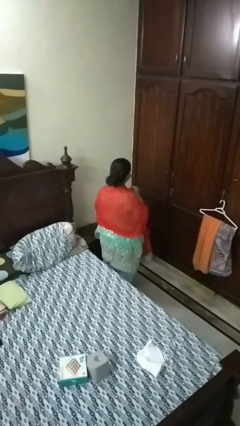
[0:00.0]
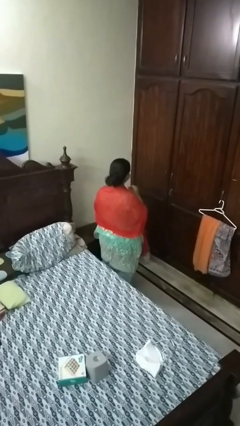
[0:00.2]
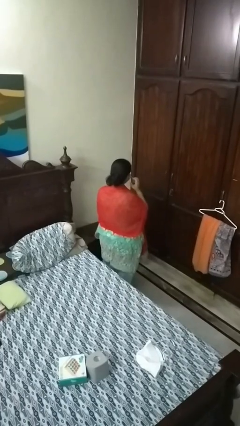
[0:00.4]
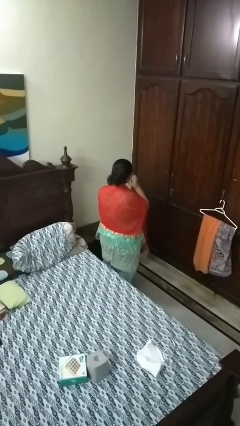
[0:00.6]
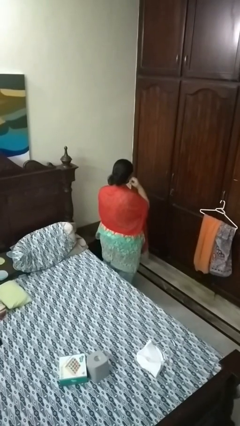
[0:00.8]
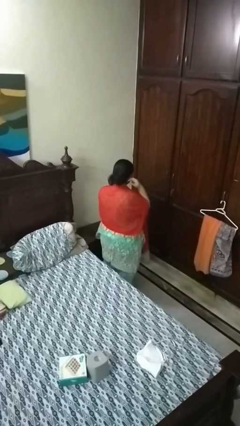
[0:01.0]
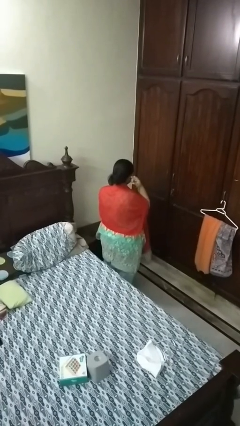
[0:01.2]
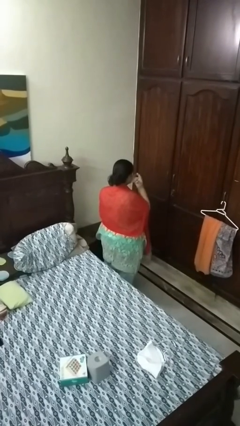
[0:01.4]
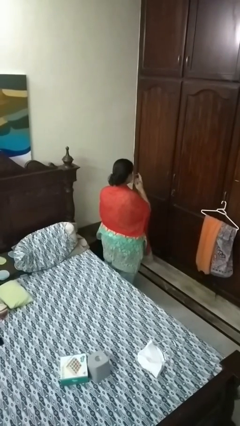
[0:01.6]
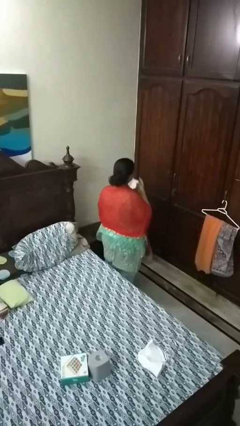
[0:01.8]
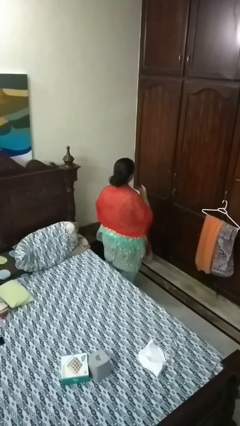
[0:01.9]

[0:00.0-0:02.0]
person takes off facemask

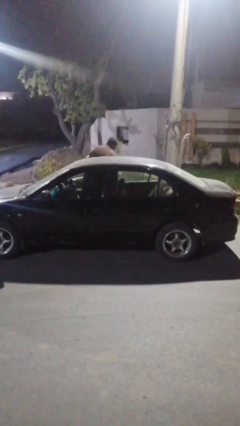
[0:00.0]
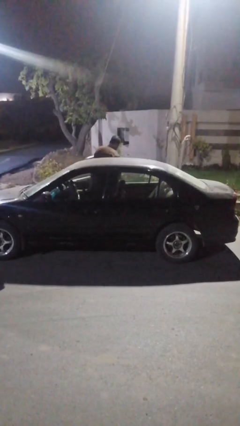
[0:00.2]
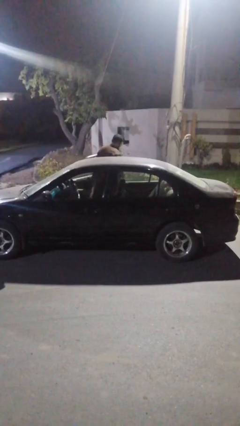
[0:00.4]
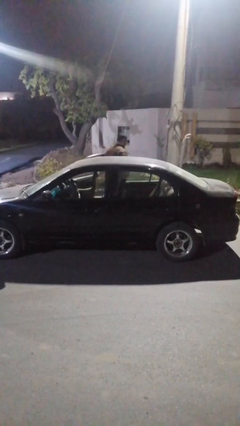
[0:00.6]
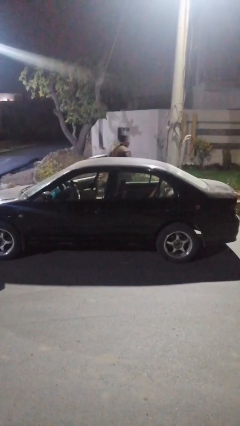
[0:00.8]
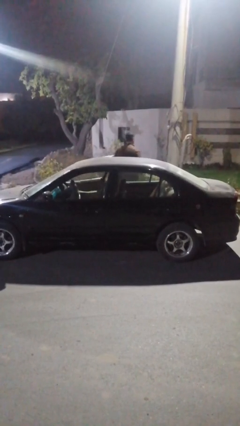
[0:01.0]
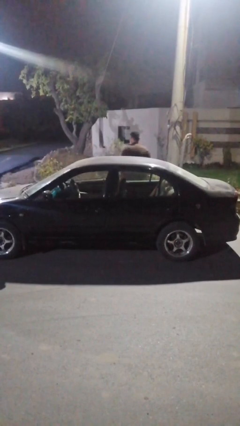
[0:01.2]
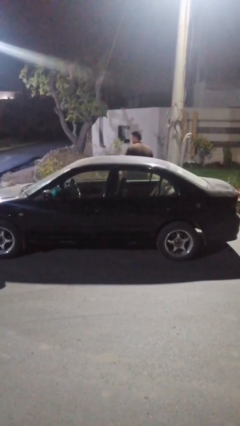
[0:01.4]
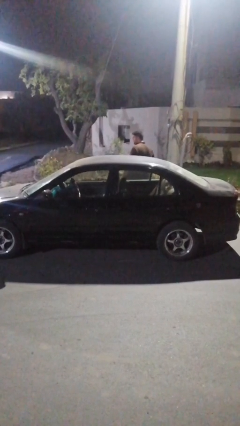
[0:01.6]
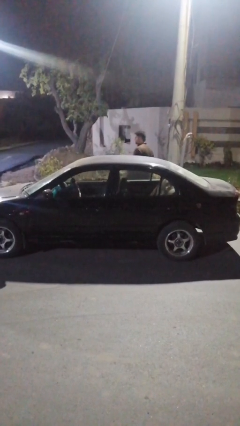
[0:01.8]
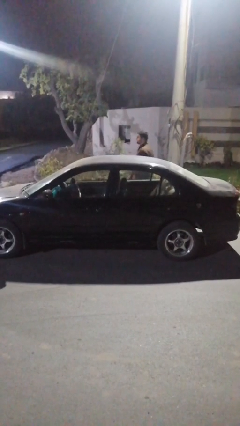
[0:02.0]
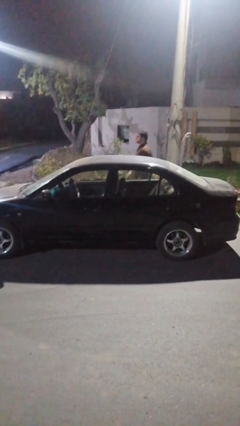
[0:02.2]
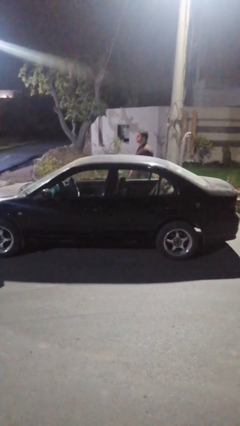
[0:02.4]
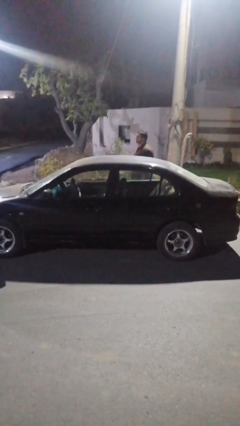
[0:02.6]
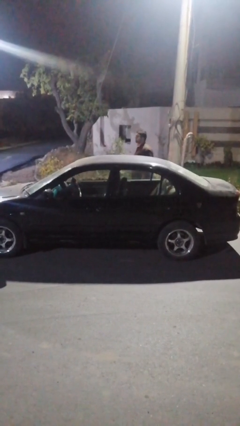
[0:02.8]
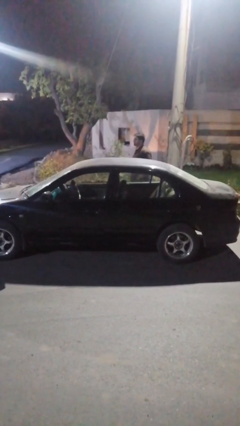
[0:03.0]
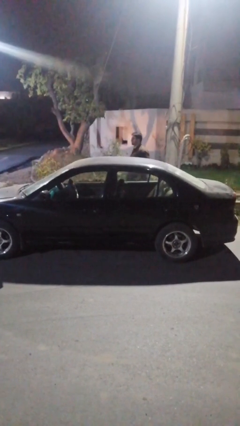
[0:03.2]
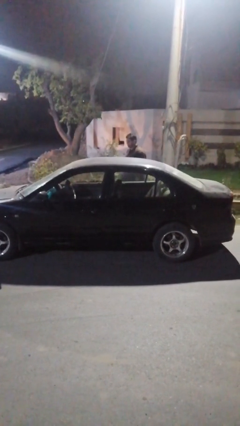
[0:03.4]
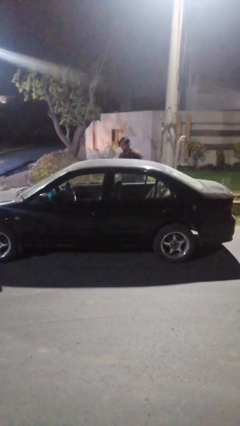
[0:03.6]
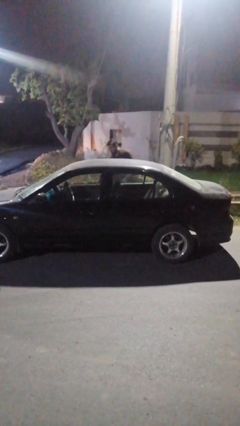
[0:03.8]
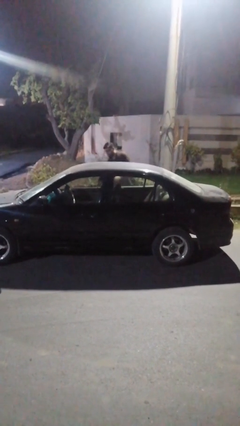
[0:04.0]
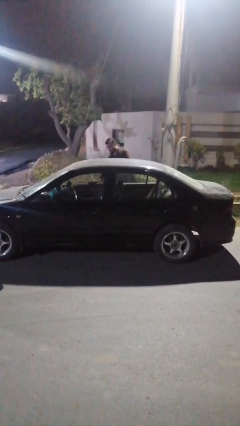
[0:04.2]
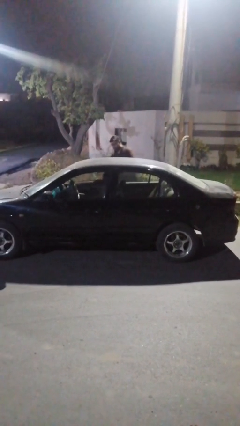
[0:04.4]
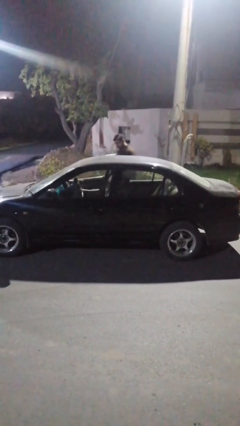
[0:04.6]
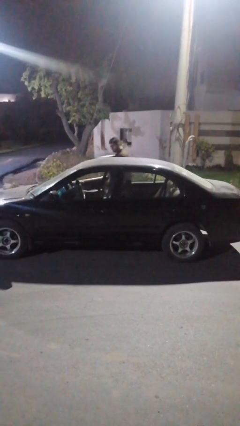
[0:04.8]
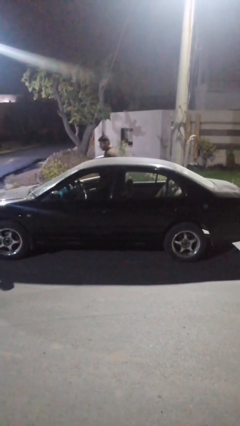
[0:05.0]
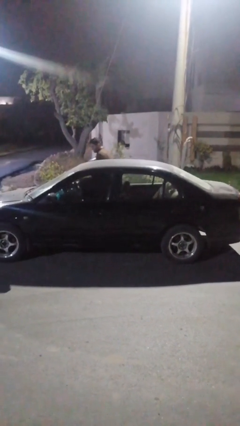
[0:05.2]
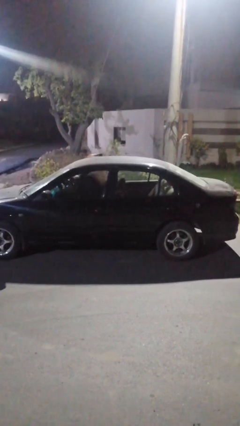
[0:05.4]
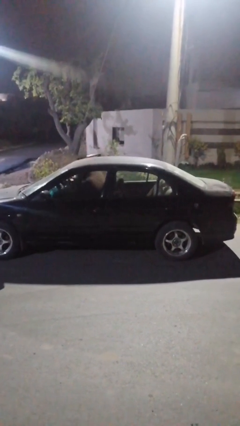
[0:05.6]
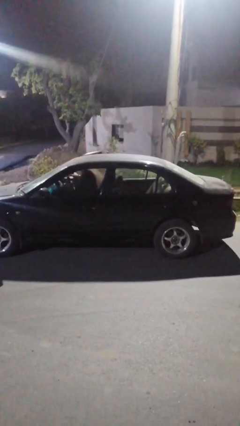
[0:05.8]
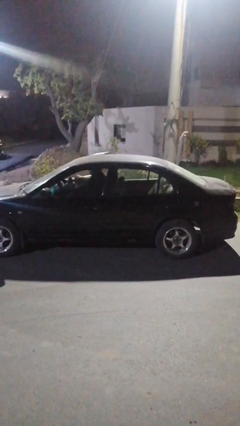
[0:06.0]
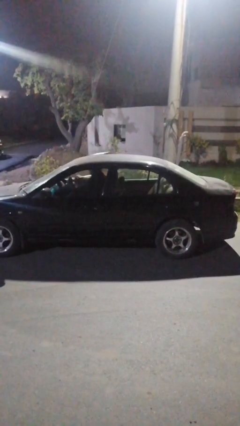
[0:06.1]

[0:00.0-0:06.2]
car drops off person

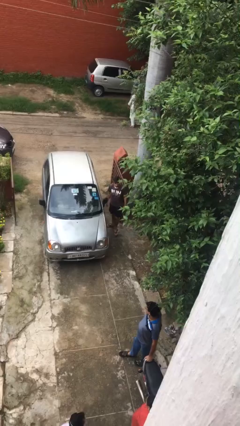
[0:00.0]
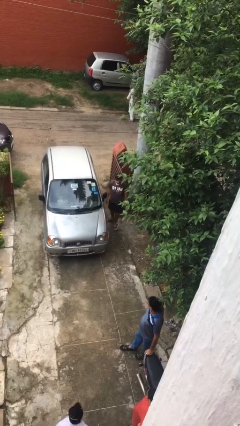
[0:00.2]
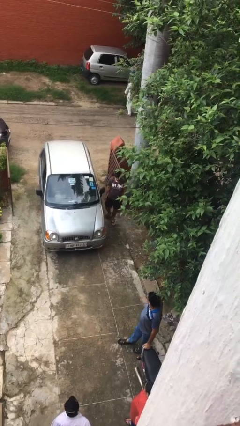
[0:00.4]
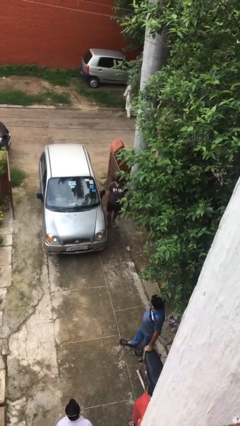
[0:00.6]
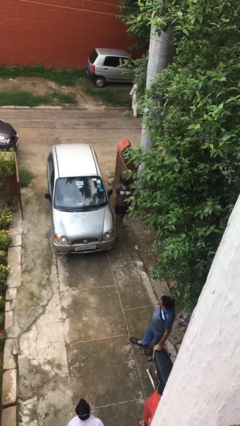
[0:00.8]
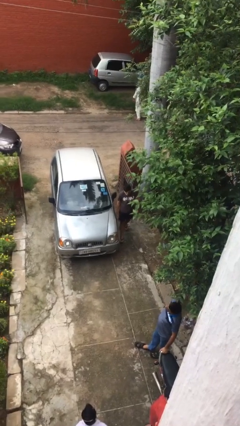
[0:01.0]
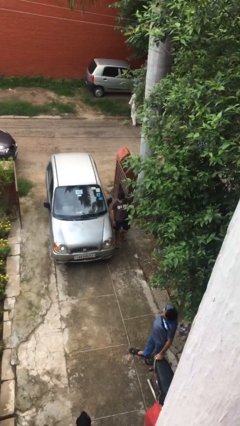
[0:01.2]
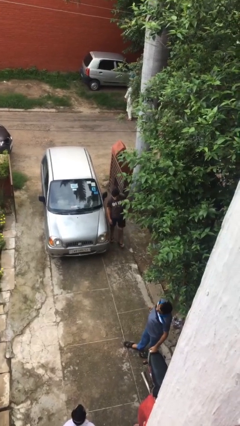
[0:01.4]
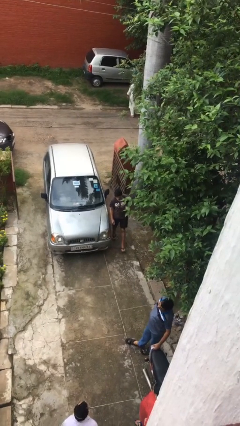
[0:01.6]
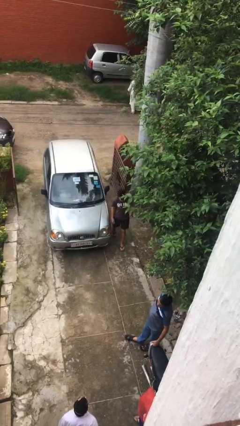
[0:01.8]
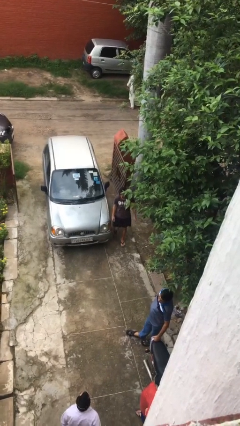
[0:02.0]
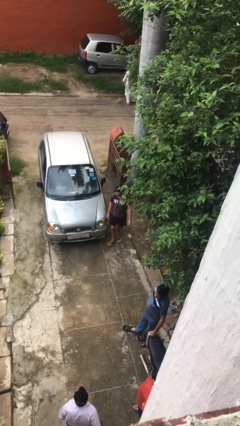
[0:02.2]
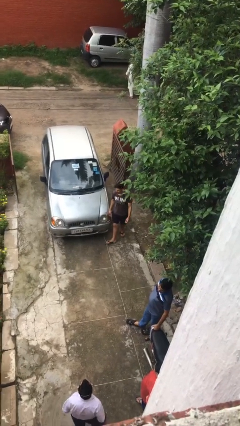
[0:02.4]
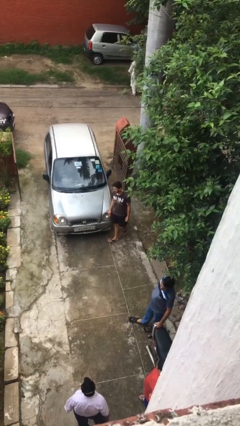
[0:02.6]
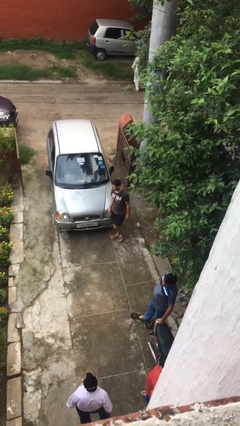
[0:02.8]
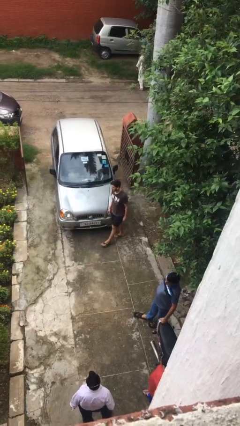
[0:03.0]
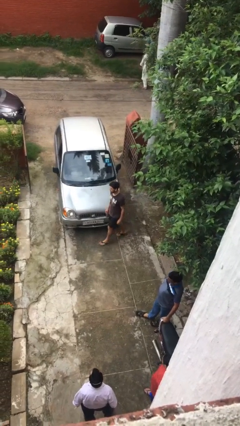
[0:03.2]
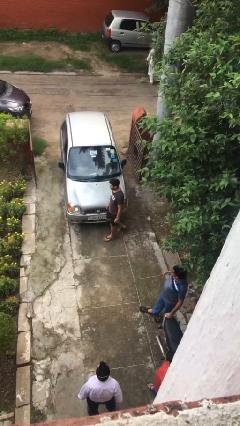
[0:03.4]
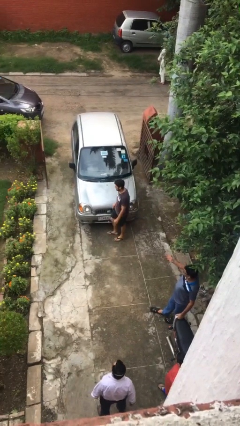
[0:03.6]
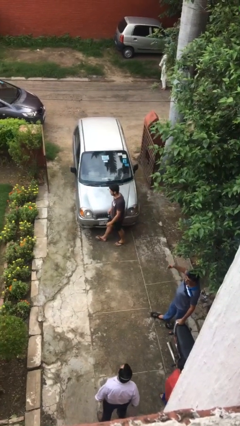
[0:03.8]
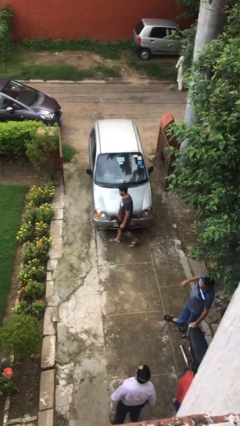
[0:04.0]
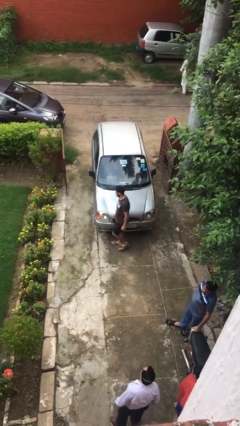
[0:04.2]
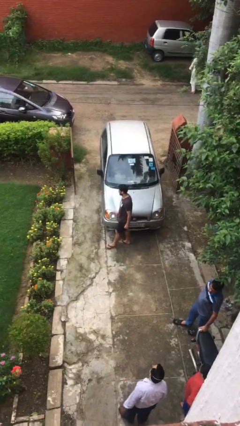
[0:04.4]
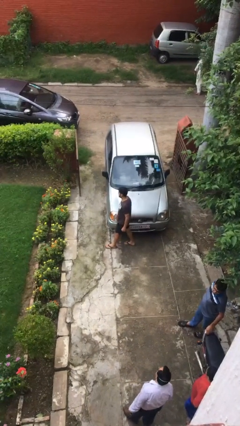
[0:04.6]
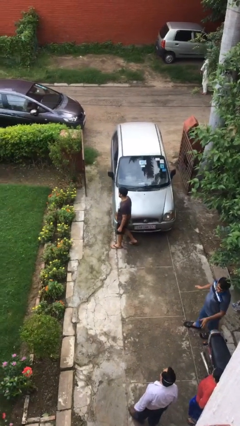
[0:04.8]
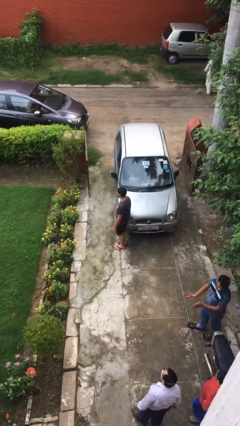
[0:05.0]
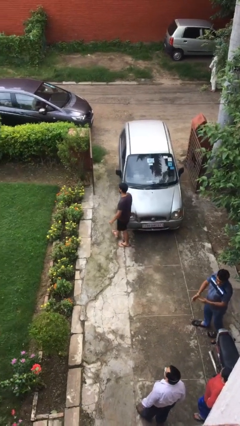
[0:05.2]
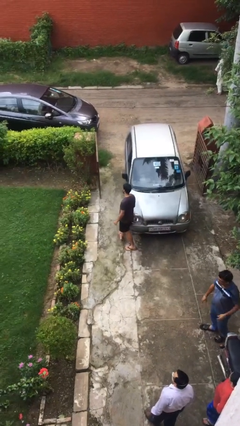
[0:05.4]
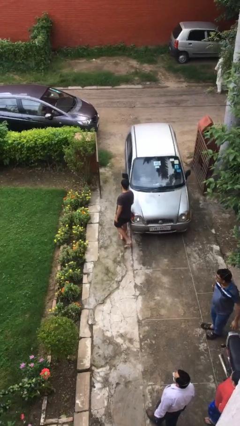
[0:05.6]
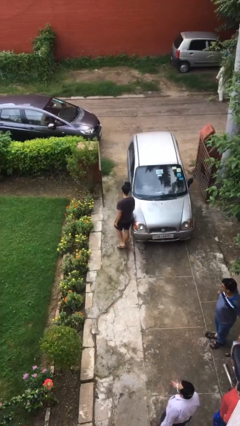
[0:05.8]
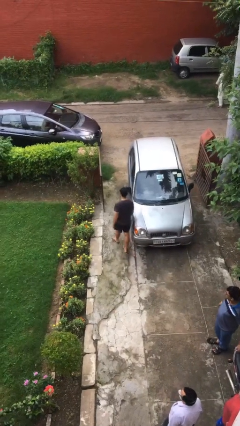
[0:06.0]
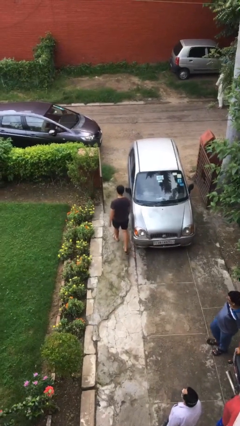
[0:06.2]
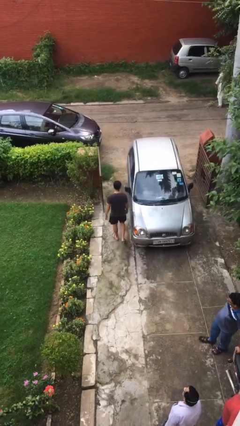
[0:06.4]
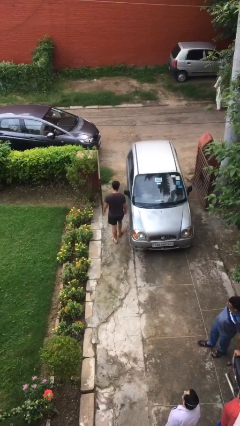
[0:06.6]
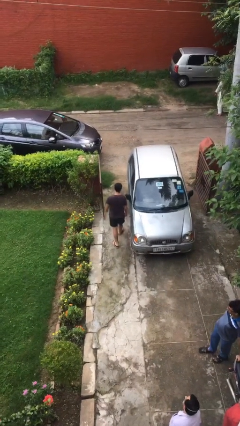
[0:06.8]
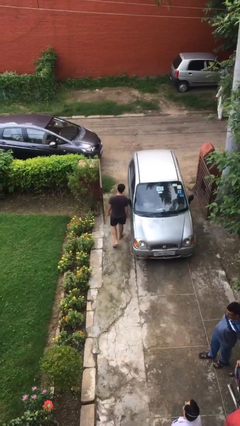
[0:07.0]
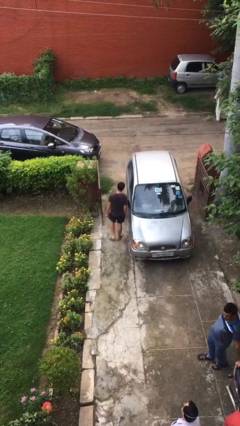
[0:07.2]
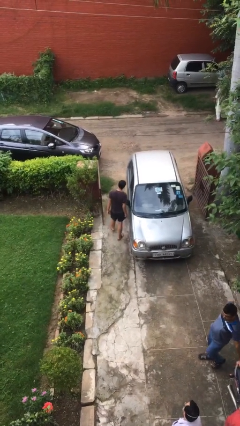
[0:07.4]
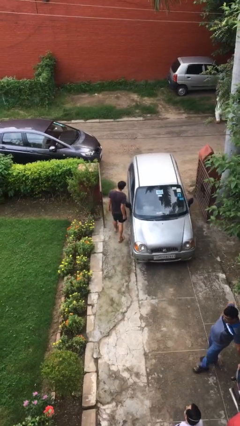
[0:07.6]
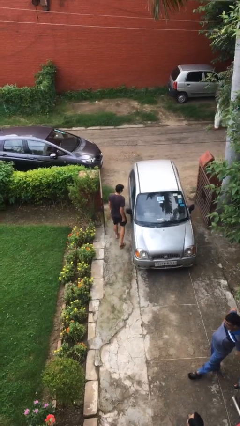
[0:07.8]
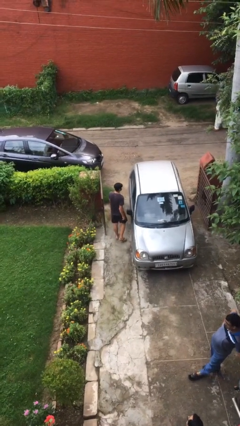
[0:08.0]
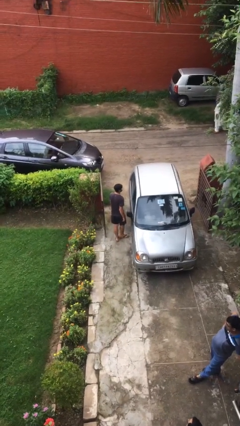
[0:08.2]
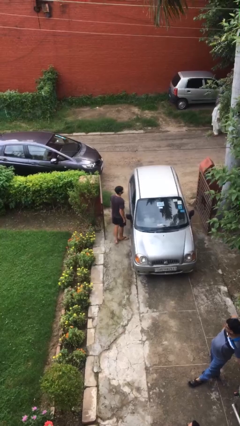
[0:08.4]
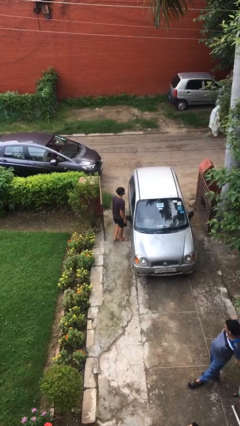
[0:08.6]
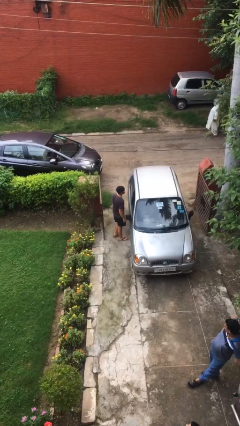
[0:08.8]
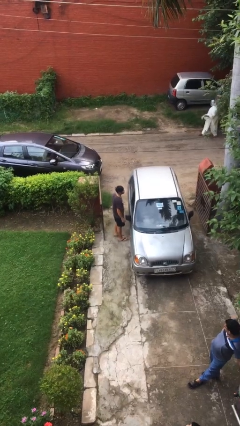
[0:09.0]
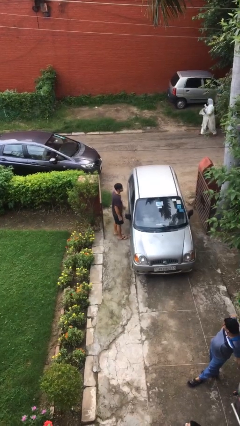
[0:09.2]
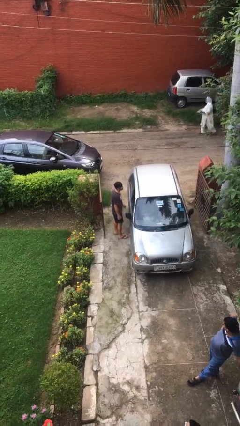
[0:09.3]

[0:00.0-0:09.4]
person walks around car
